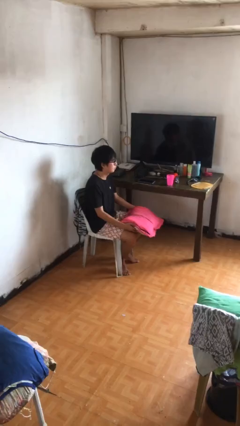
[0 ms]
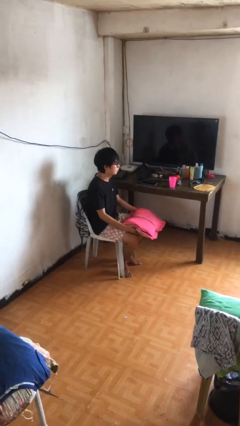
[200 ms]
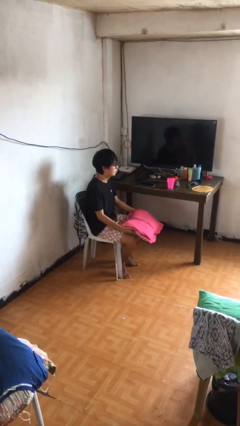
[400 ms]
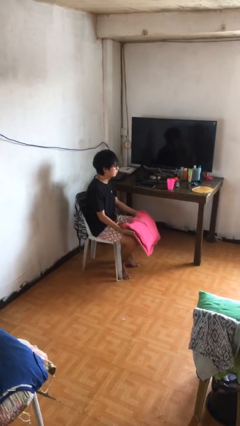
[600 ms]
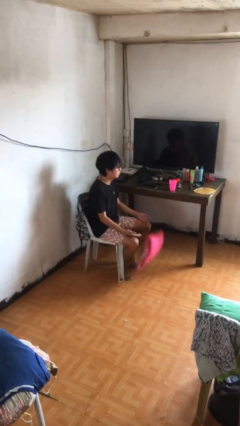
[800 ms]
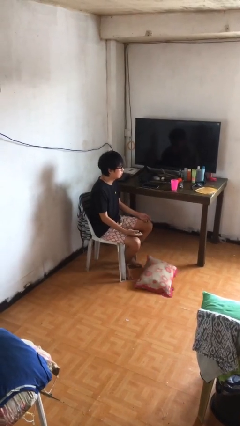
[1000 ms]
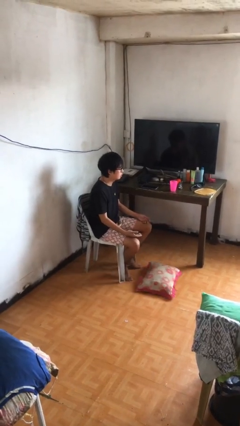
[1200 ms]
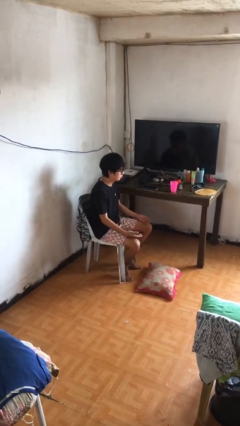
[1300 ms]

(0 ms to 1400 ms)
person drops object

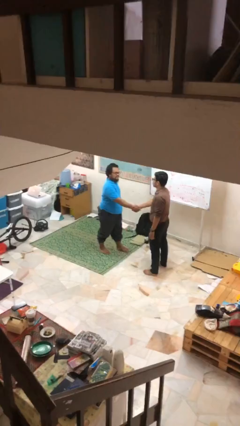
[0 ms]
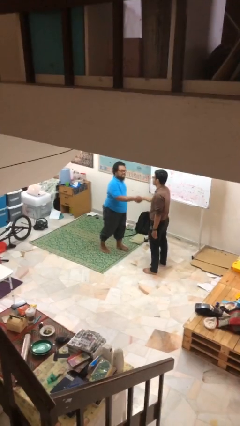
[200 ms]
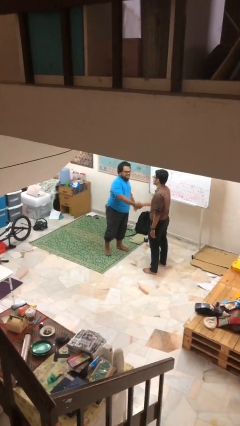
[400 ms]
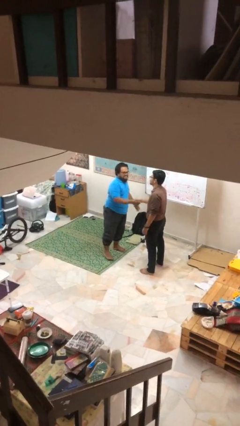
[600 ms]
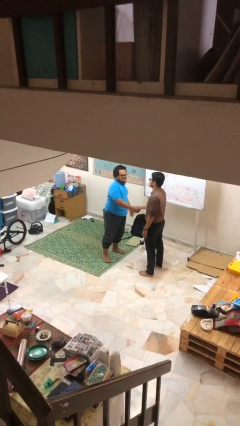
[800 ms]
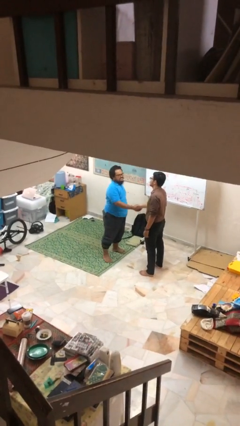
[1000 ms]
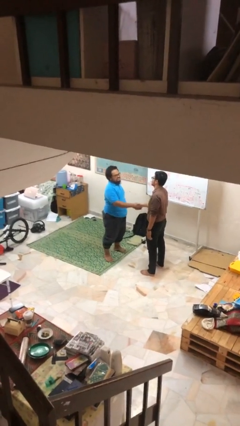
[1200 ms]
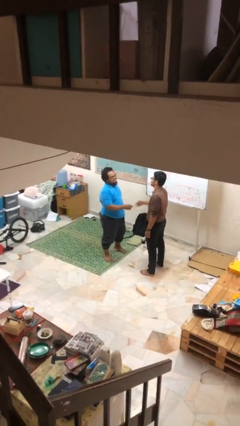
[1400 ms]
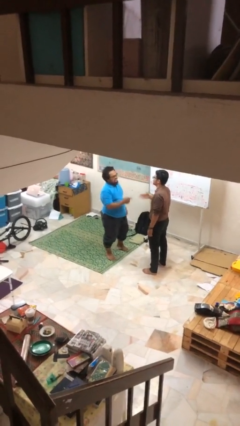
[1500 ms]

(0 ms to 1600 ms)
person shakes hand

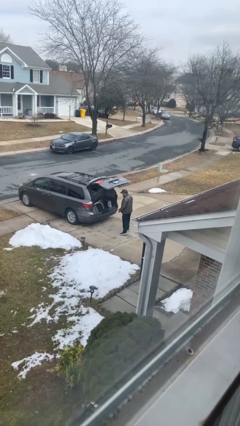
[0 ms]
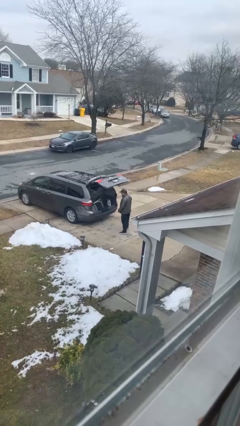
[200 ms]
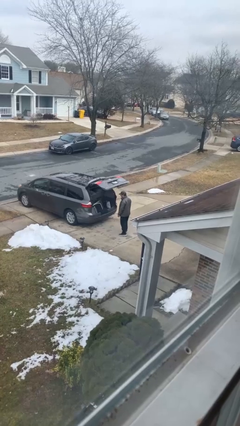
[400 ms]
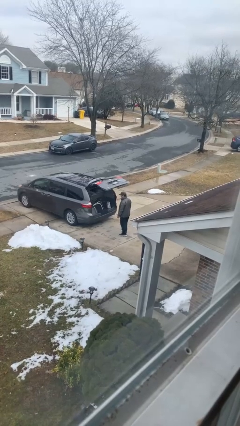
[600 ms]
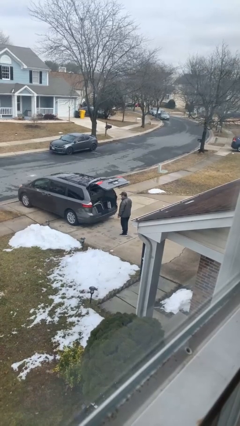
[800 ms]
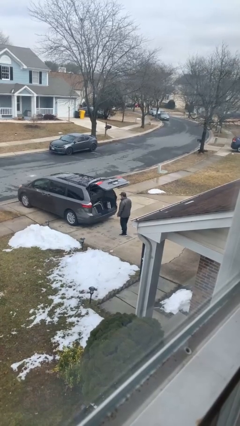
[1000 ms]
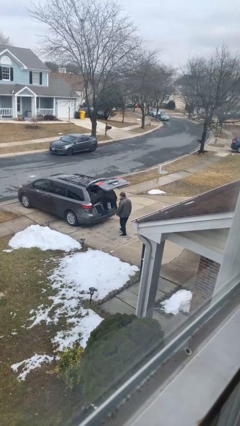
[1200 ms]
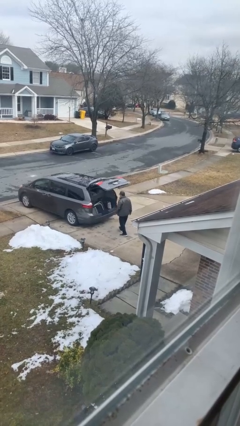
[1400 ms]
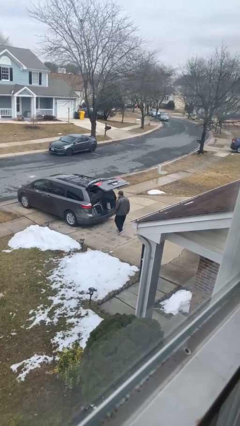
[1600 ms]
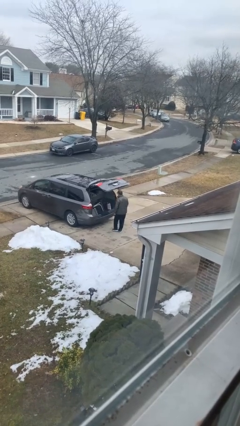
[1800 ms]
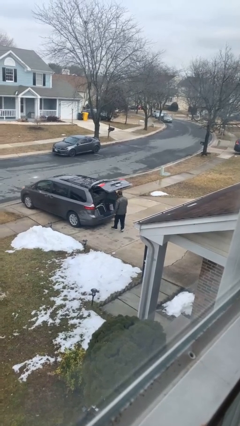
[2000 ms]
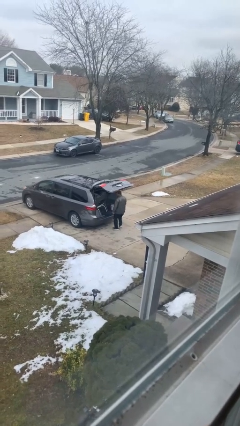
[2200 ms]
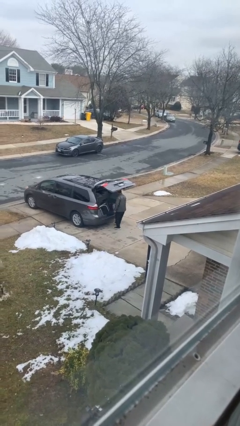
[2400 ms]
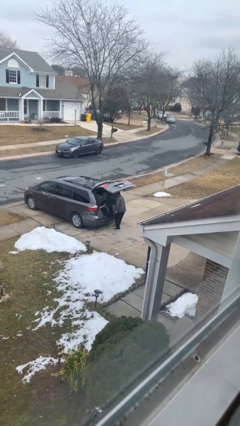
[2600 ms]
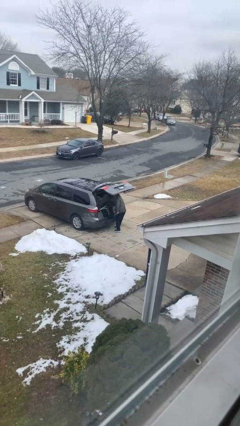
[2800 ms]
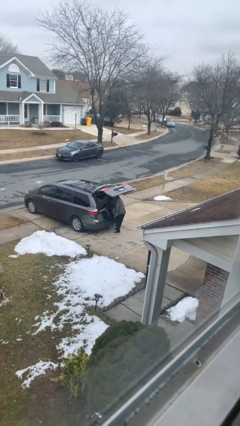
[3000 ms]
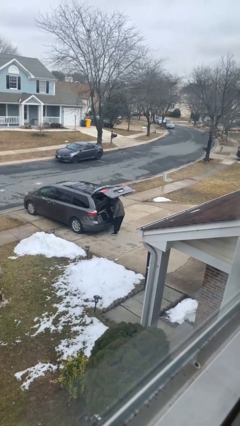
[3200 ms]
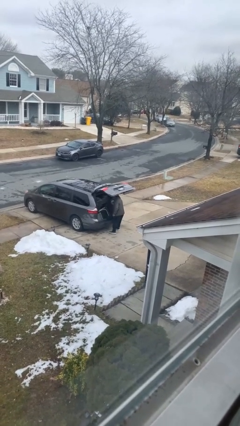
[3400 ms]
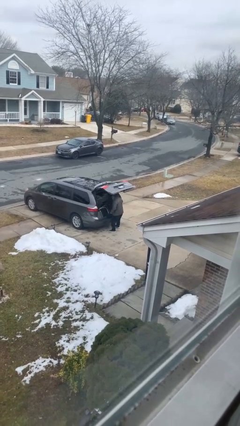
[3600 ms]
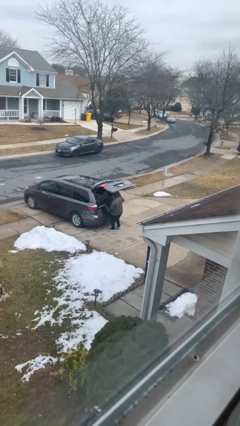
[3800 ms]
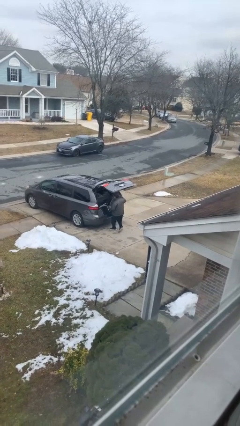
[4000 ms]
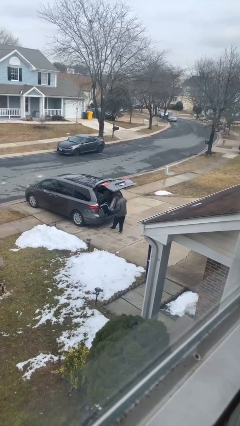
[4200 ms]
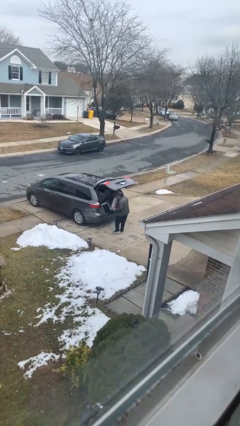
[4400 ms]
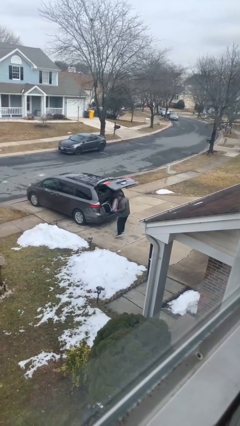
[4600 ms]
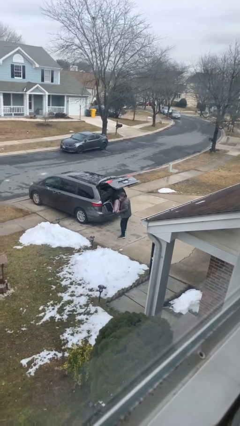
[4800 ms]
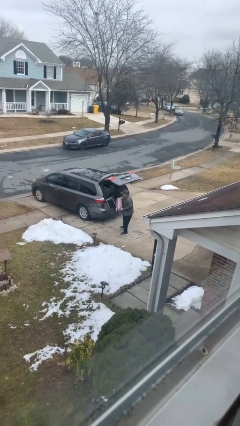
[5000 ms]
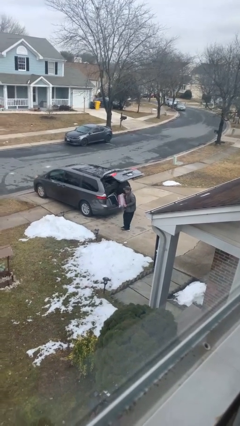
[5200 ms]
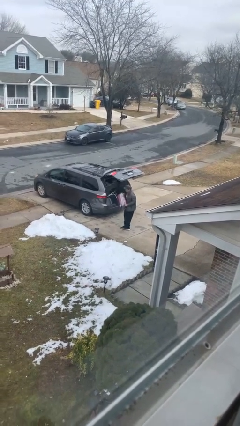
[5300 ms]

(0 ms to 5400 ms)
person unloads car

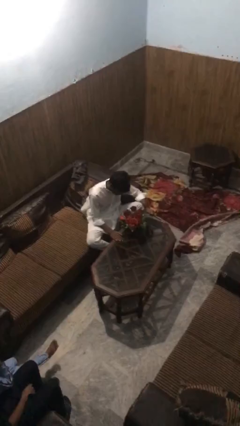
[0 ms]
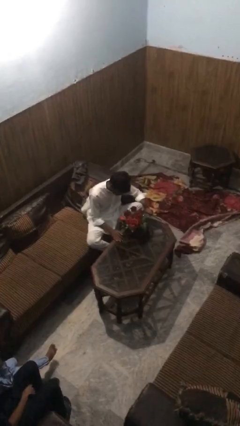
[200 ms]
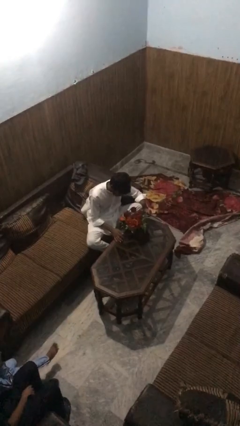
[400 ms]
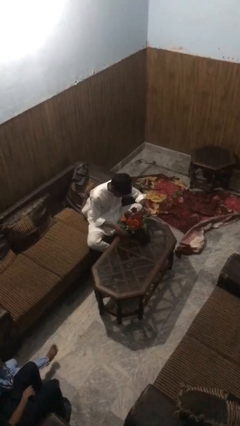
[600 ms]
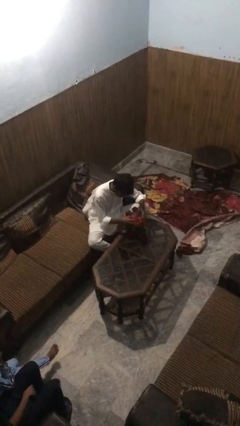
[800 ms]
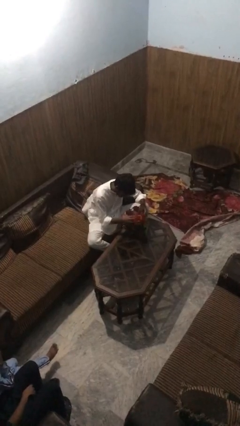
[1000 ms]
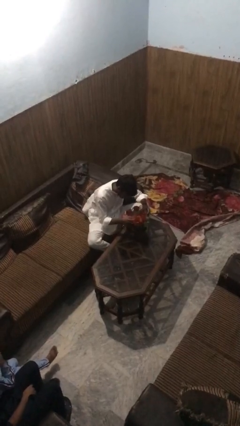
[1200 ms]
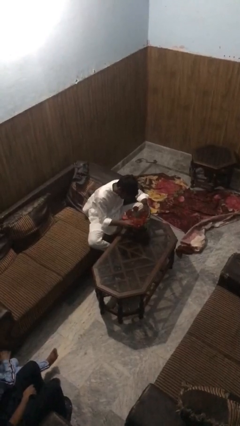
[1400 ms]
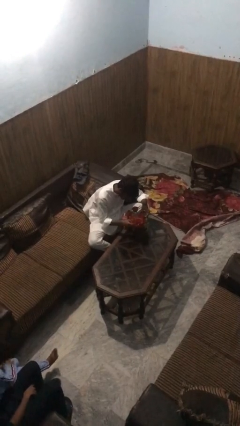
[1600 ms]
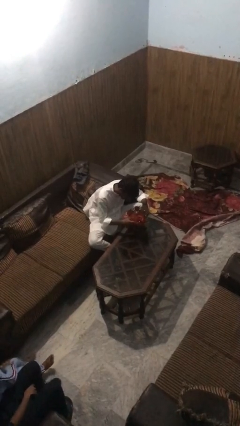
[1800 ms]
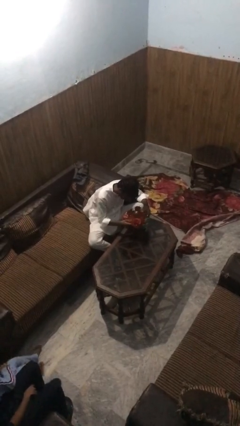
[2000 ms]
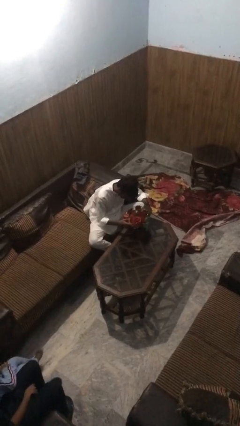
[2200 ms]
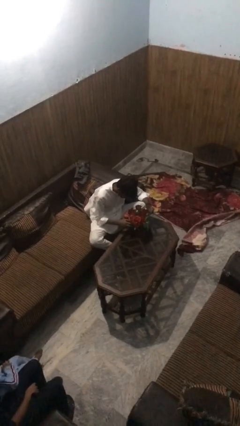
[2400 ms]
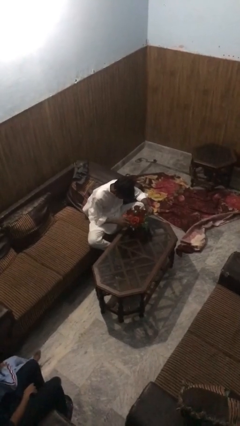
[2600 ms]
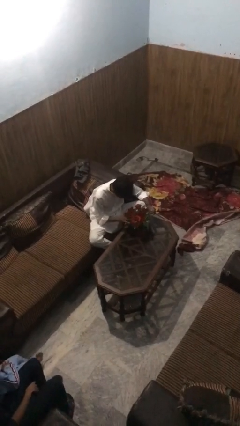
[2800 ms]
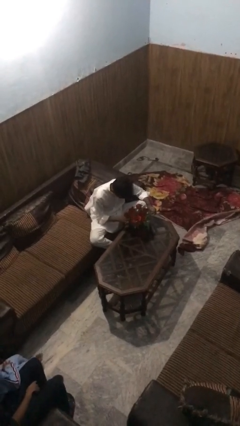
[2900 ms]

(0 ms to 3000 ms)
person arranges flowers in vase

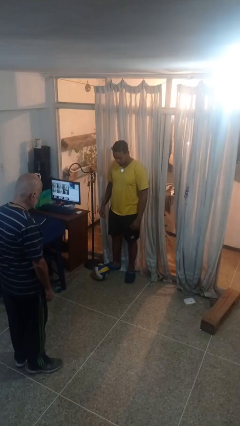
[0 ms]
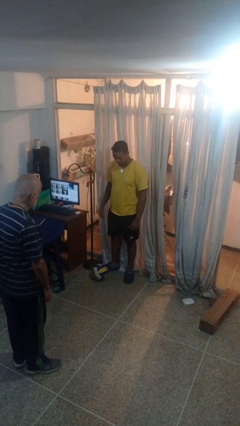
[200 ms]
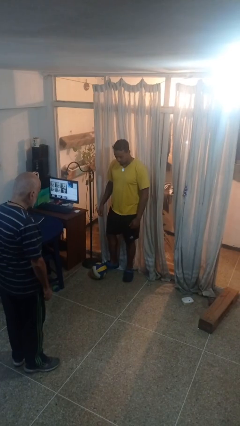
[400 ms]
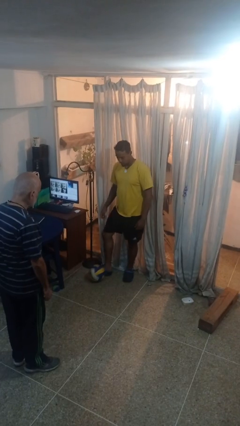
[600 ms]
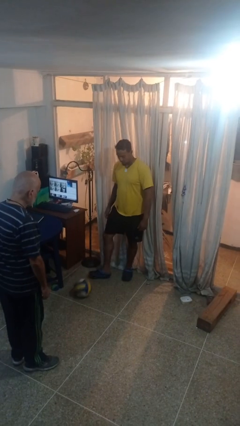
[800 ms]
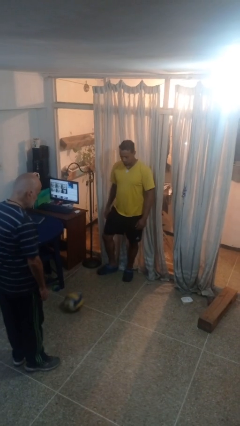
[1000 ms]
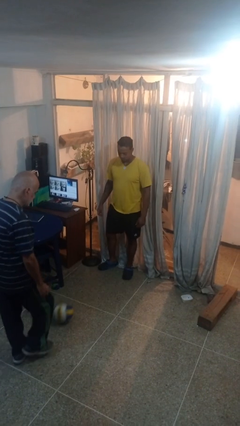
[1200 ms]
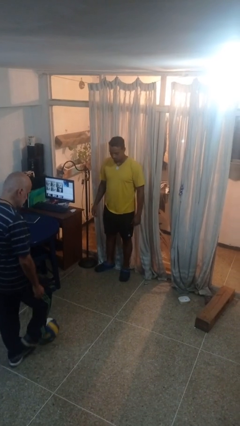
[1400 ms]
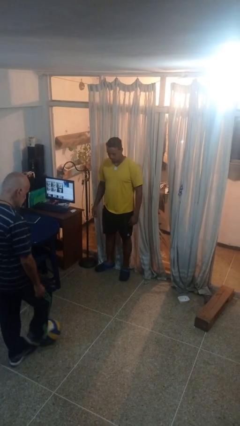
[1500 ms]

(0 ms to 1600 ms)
person kicks object to person

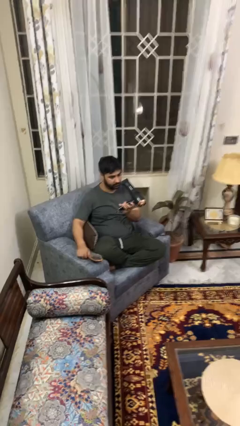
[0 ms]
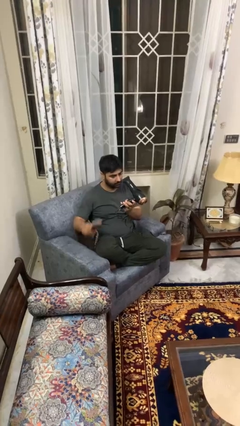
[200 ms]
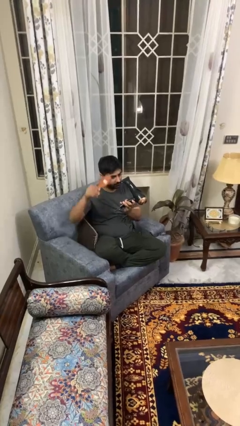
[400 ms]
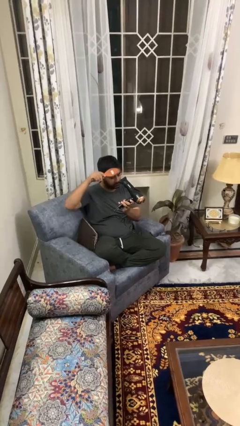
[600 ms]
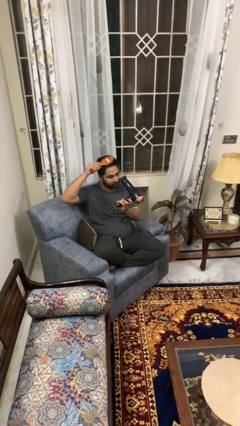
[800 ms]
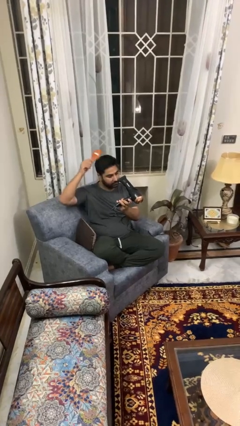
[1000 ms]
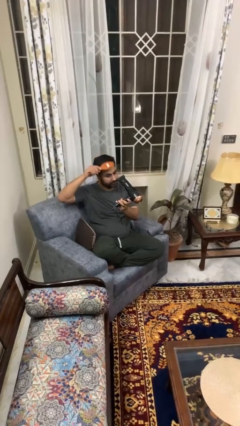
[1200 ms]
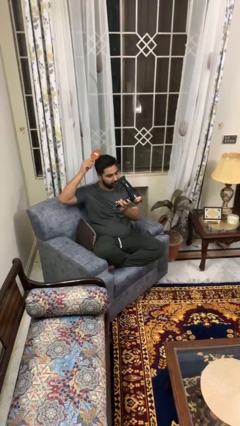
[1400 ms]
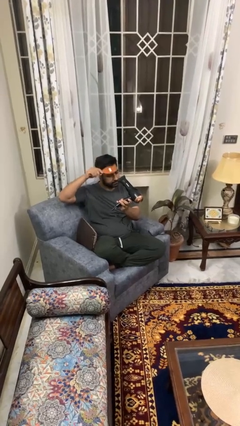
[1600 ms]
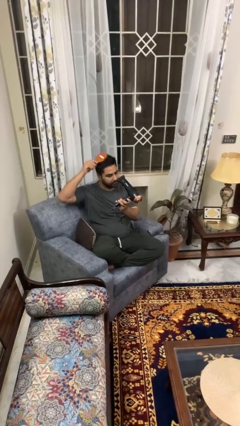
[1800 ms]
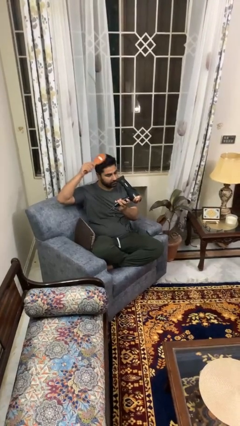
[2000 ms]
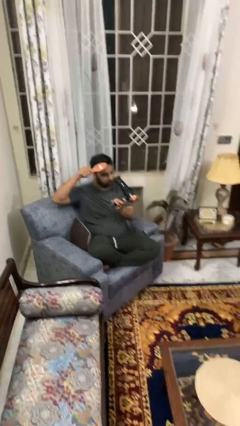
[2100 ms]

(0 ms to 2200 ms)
person dries hair with hairdryer

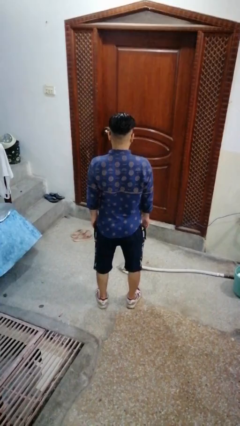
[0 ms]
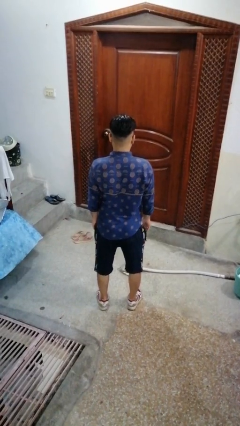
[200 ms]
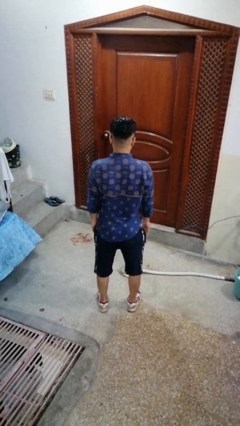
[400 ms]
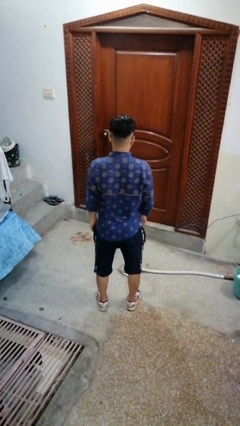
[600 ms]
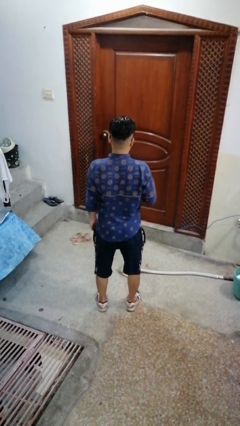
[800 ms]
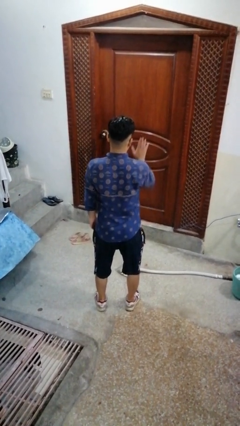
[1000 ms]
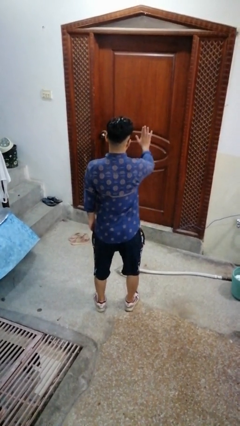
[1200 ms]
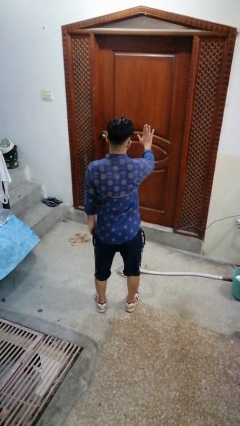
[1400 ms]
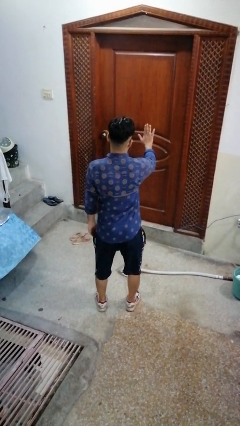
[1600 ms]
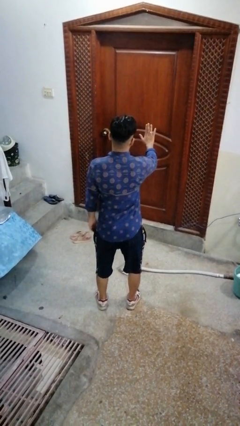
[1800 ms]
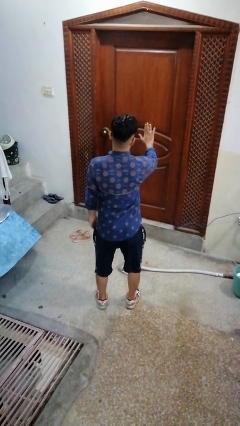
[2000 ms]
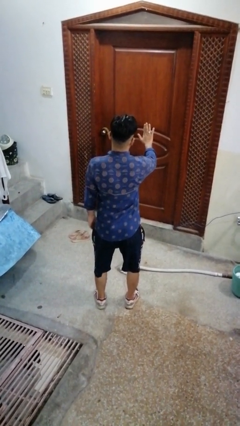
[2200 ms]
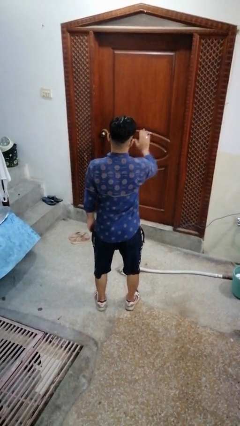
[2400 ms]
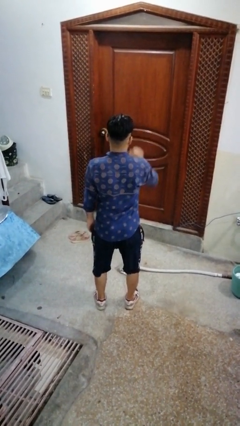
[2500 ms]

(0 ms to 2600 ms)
person gestures stop
